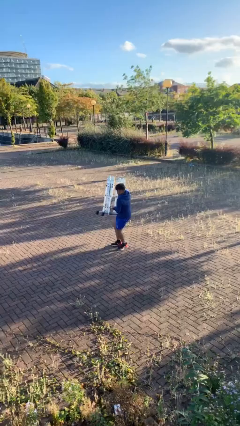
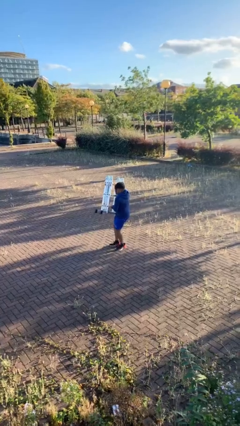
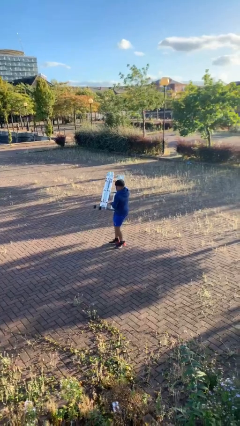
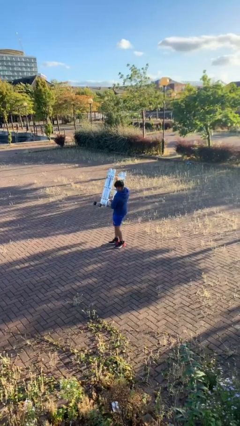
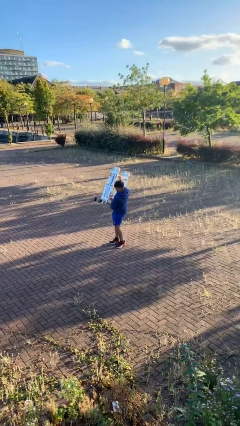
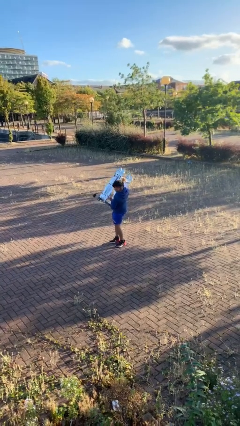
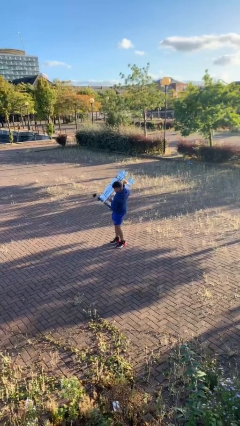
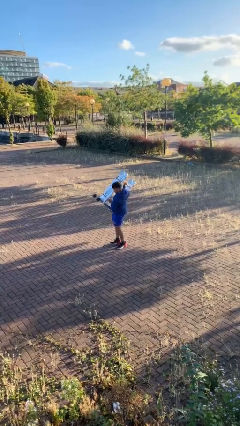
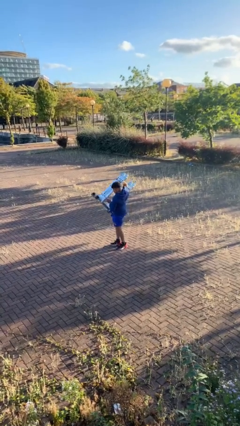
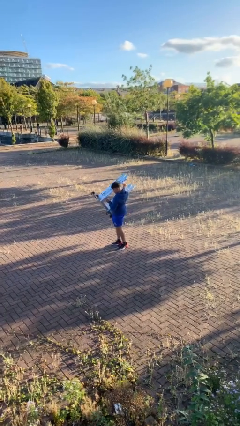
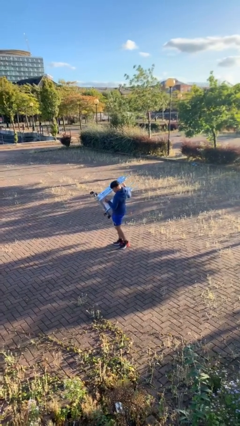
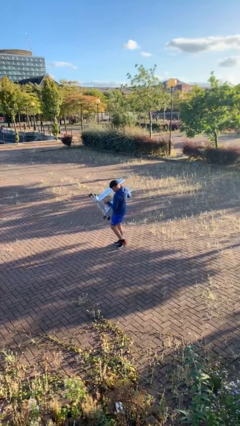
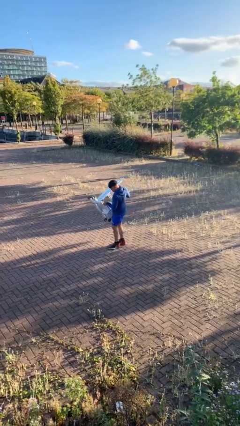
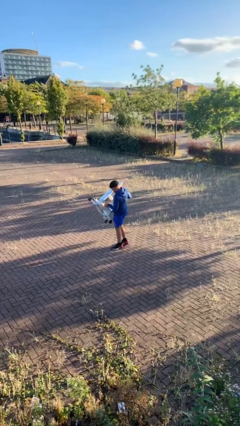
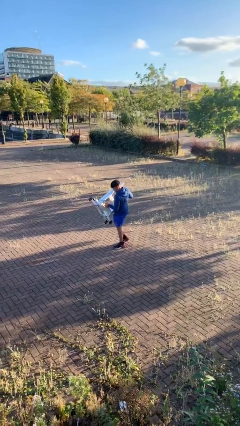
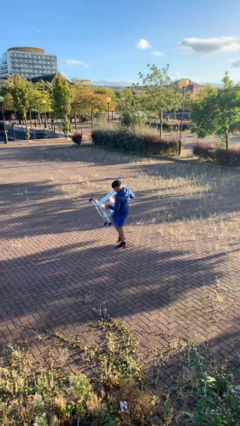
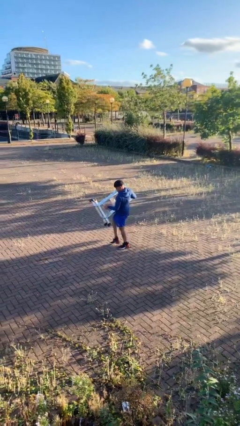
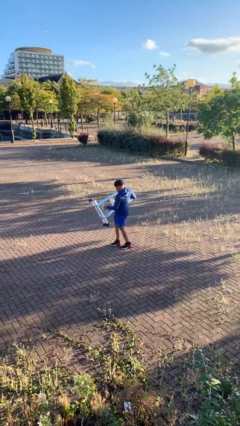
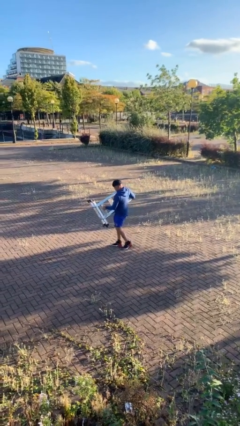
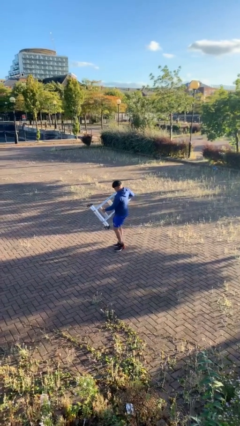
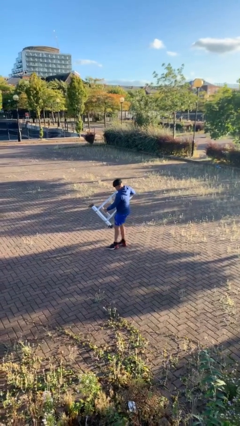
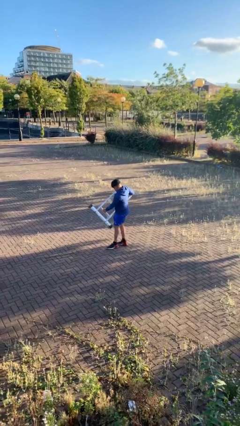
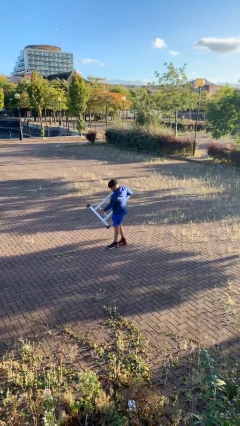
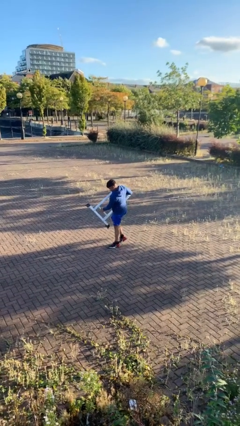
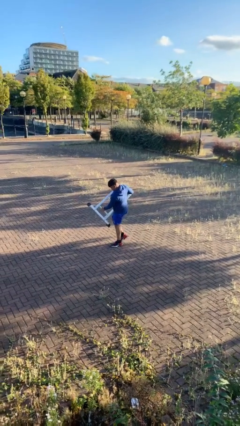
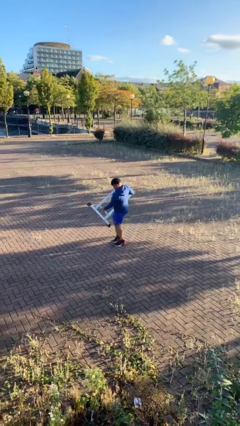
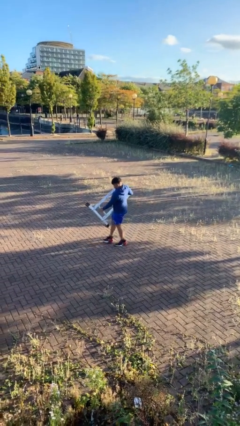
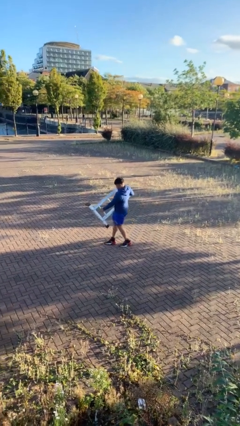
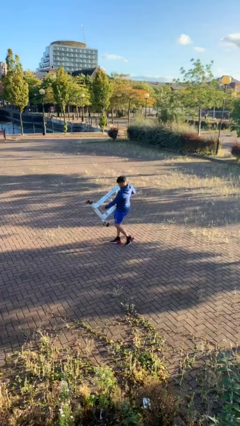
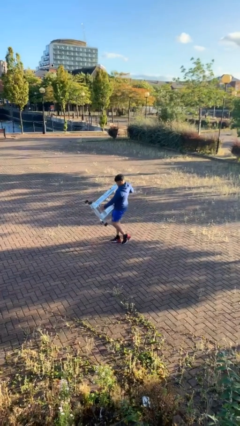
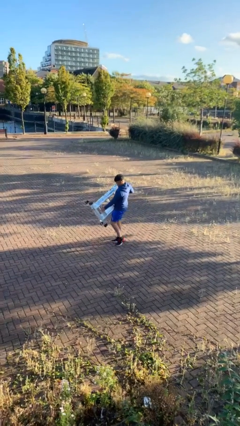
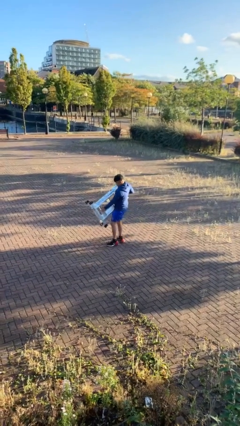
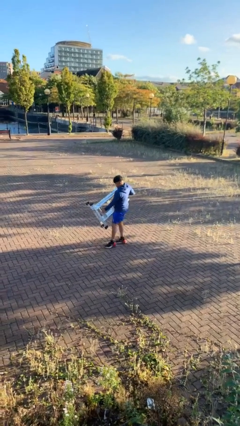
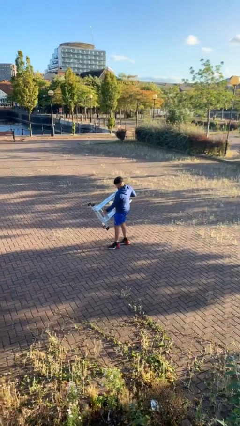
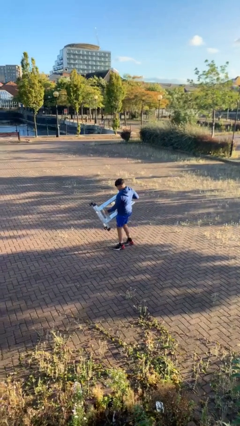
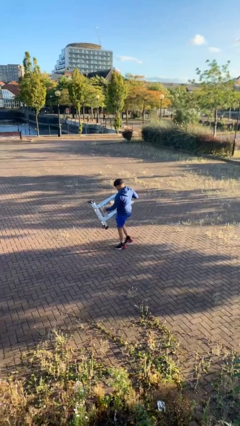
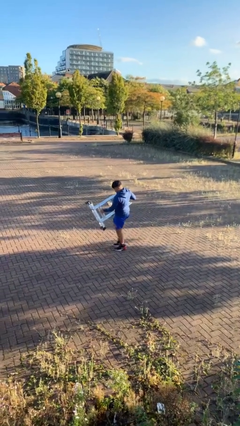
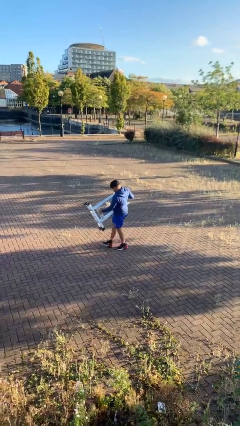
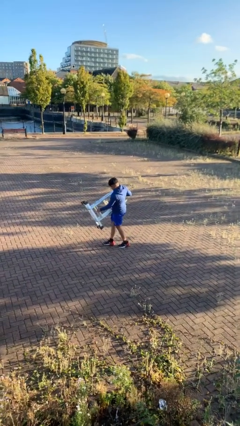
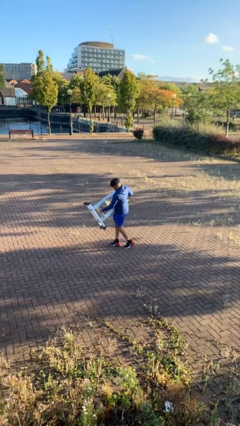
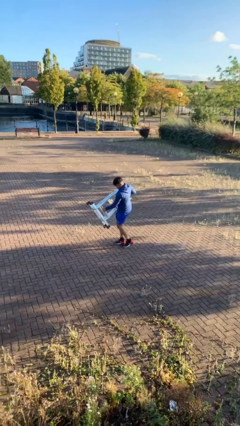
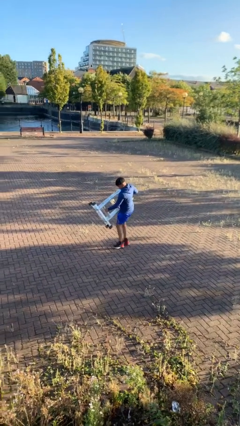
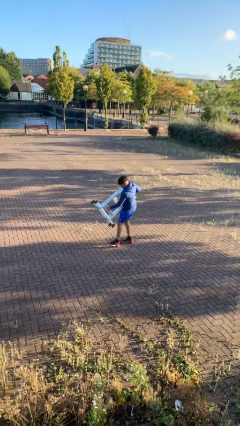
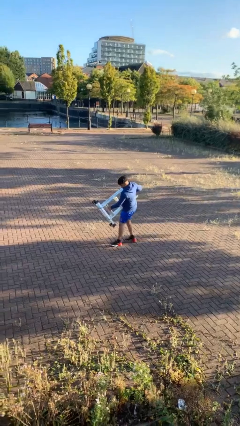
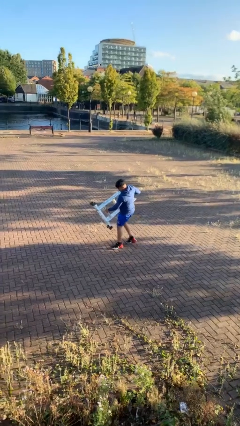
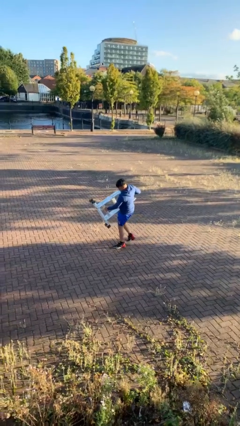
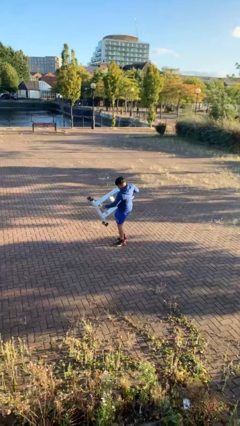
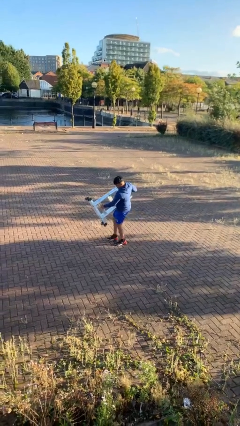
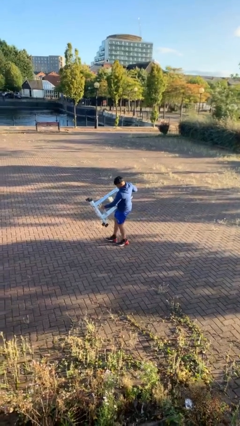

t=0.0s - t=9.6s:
person carries heavy object

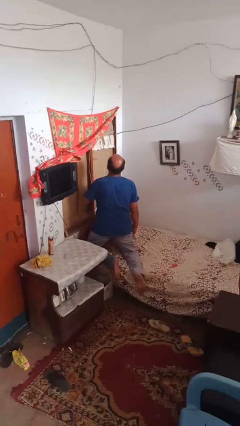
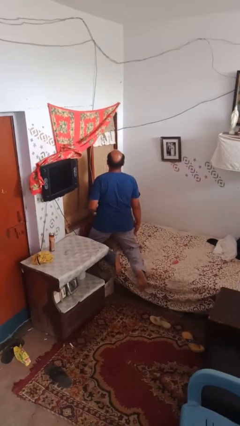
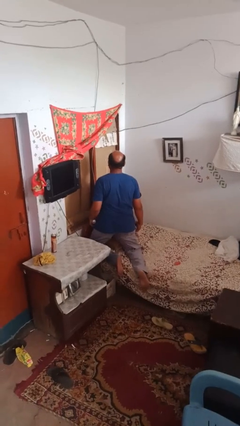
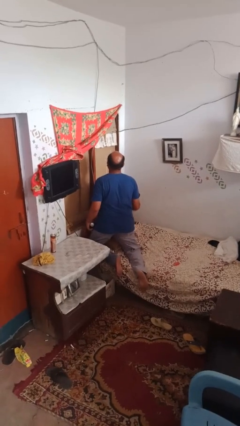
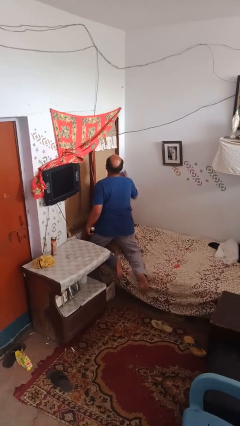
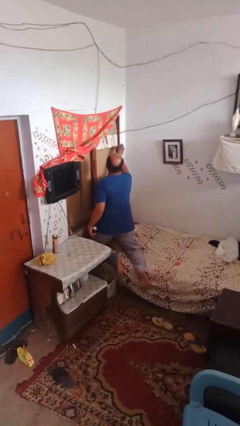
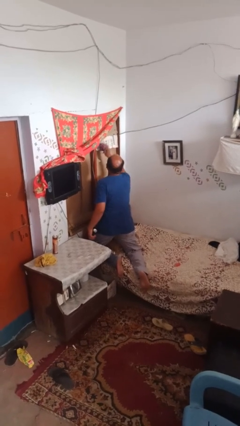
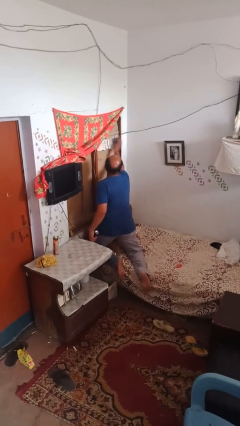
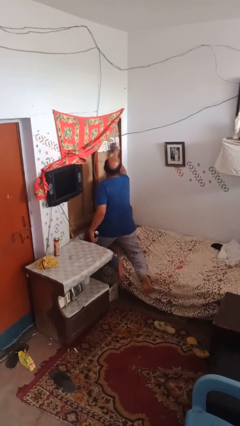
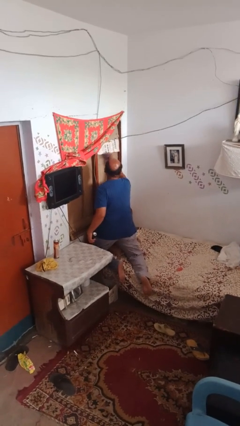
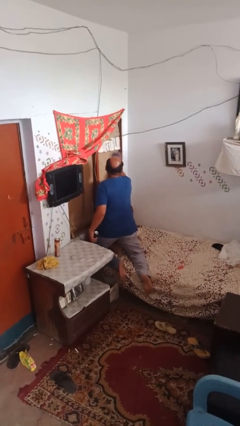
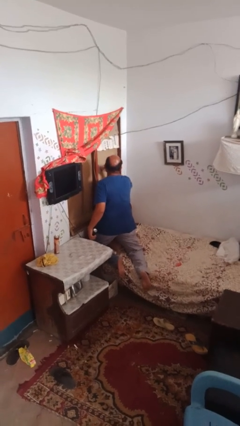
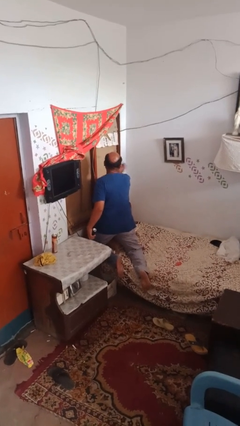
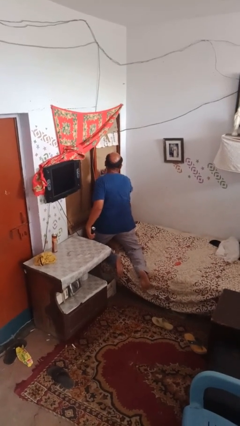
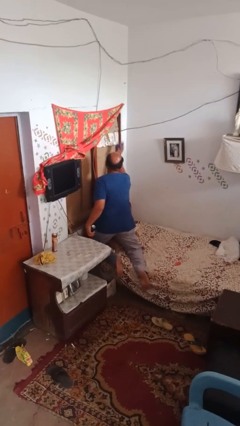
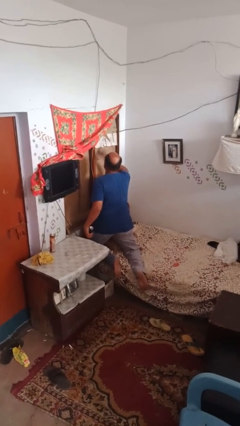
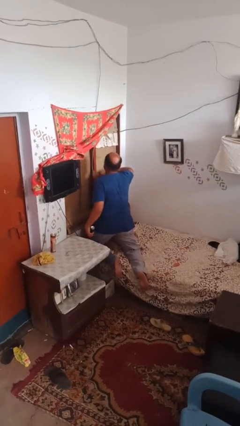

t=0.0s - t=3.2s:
person washes window

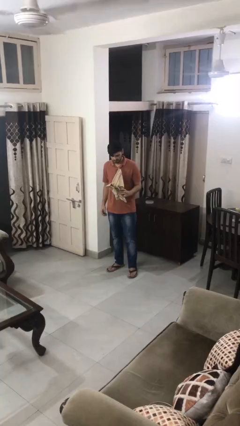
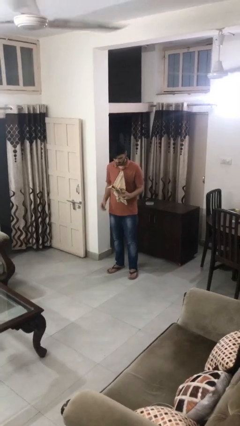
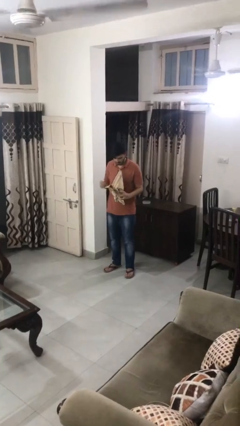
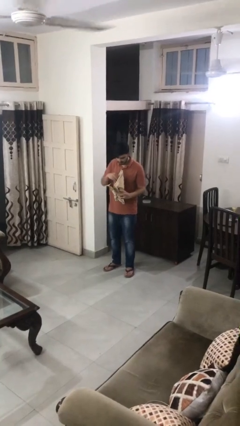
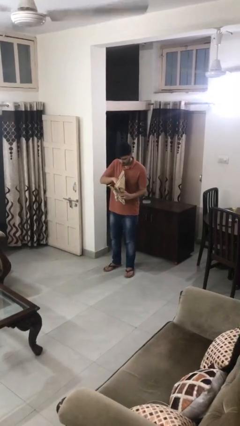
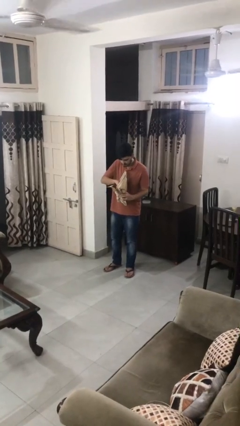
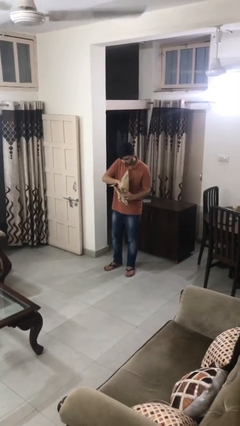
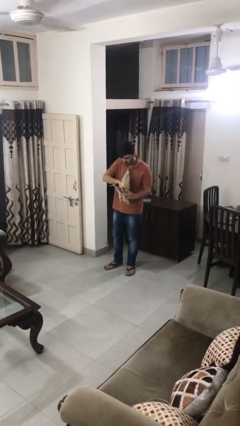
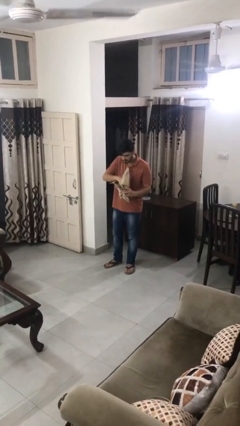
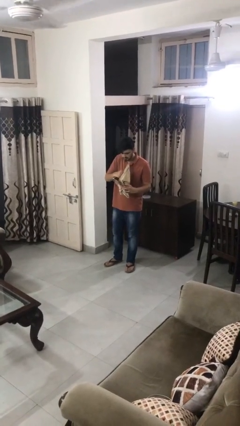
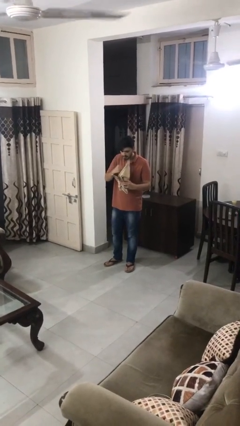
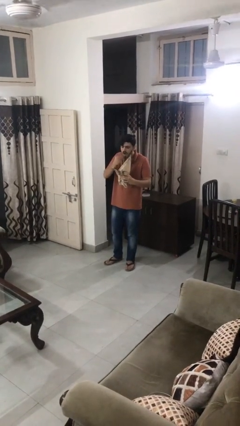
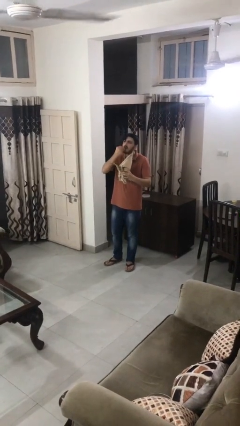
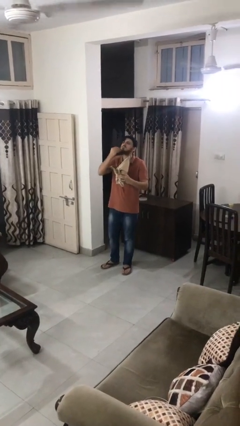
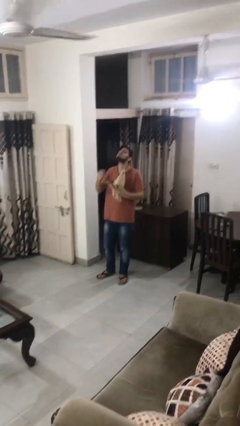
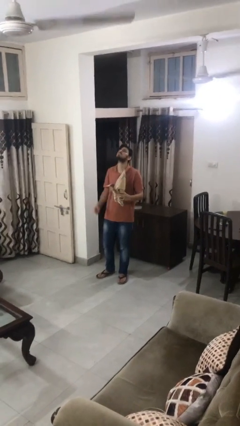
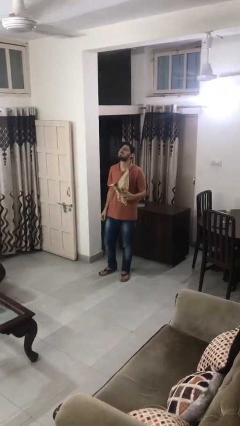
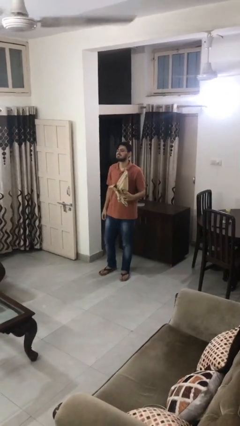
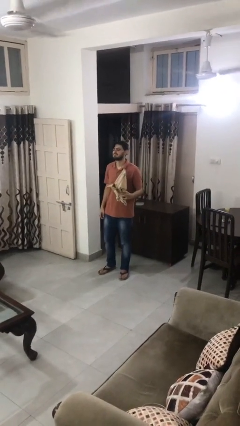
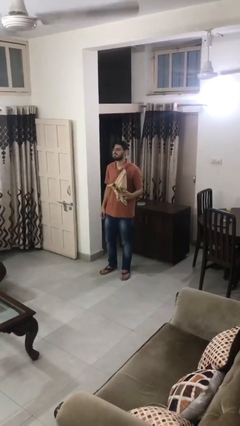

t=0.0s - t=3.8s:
person eats snack from bag

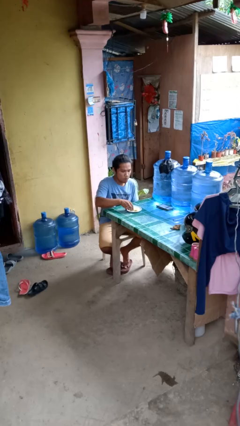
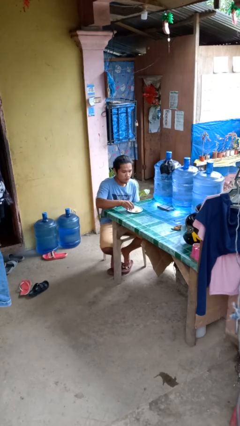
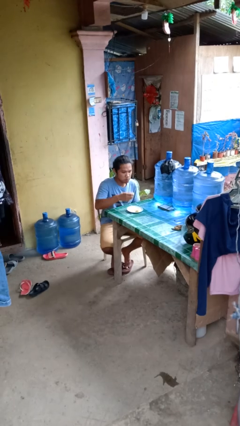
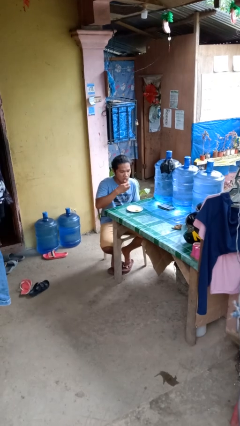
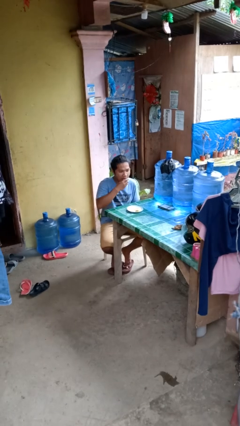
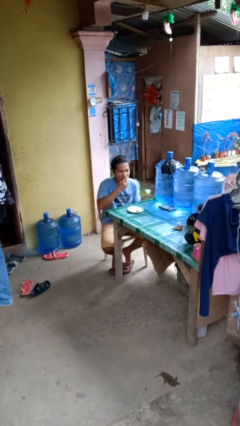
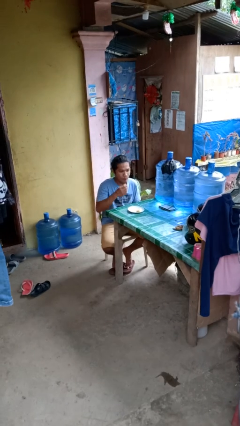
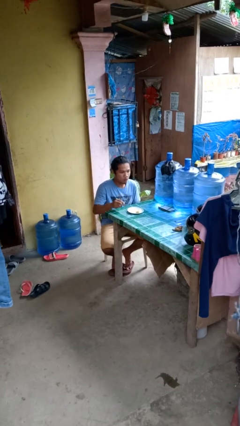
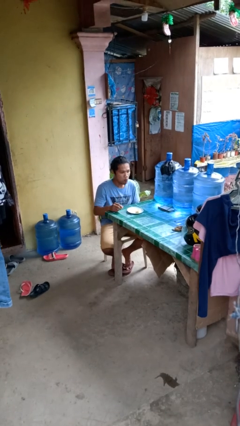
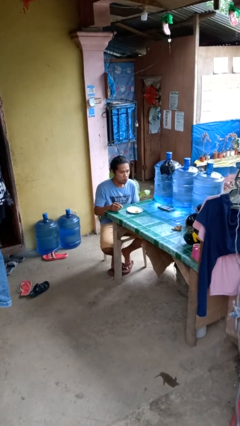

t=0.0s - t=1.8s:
person eats with hands
